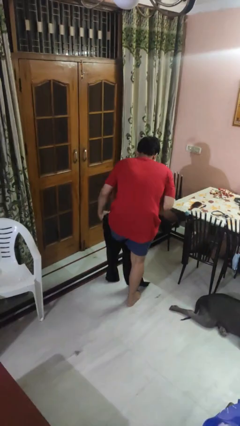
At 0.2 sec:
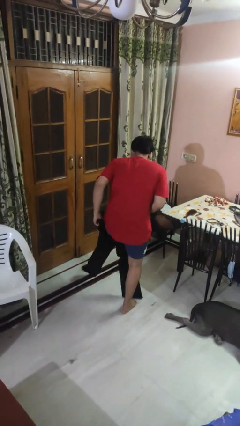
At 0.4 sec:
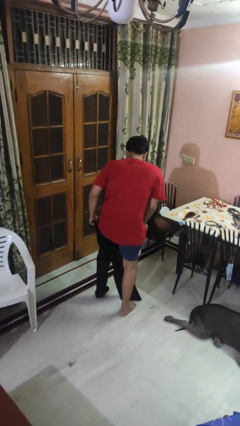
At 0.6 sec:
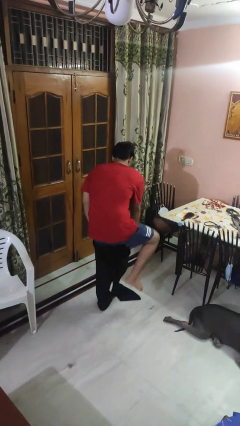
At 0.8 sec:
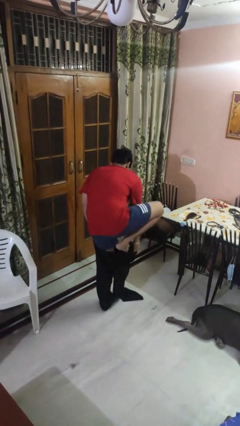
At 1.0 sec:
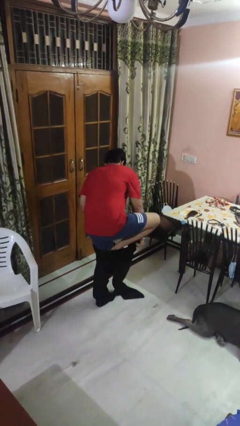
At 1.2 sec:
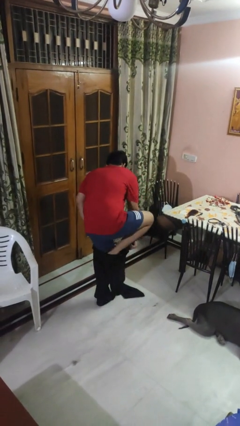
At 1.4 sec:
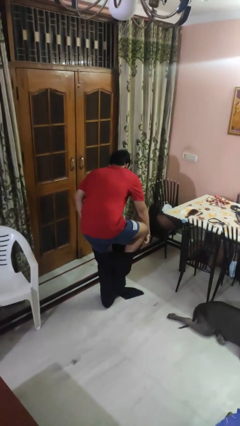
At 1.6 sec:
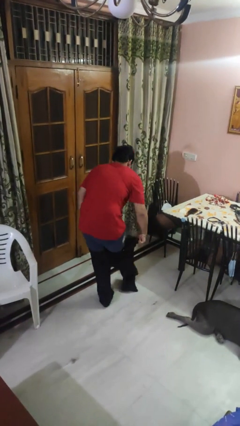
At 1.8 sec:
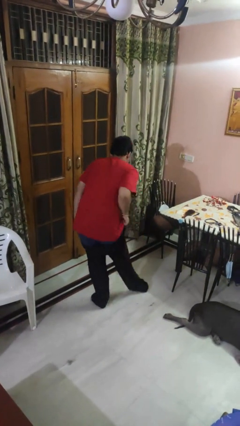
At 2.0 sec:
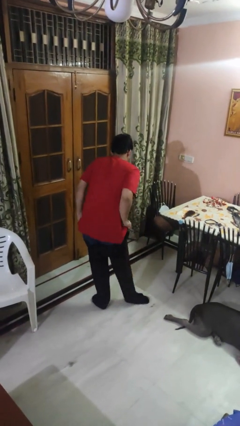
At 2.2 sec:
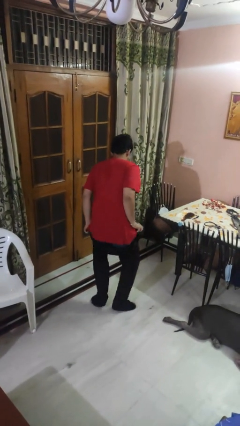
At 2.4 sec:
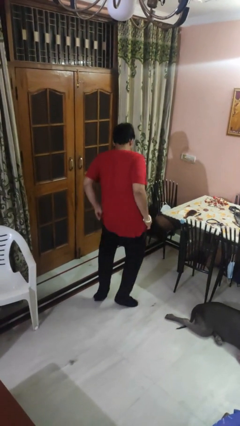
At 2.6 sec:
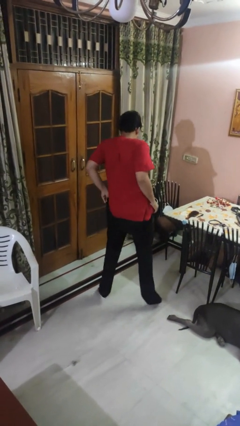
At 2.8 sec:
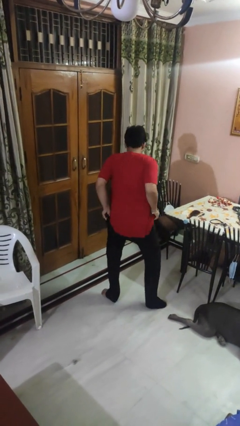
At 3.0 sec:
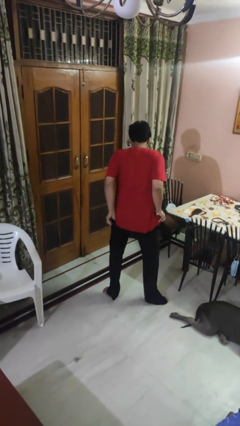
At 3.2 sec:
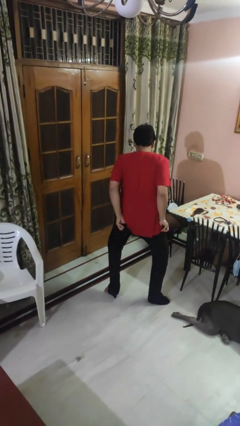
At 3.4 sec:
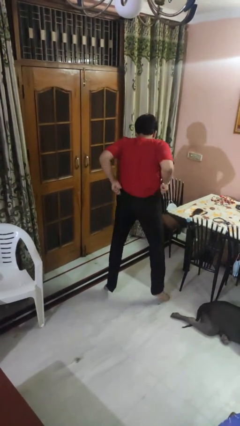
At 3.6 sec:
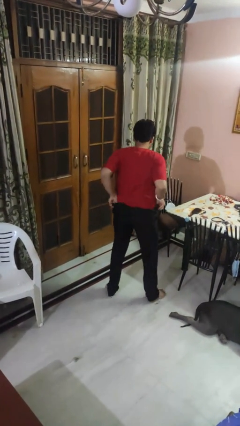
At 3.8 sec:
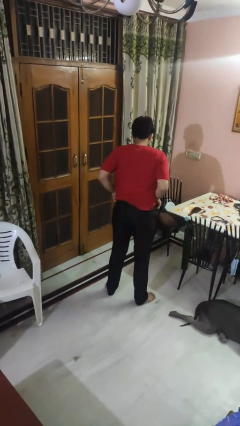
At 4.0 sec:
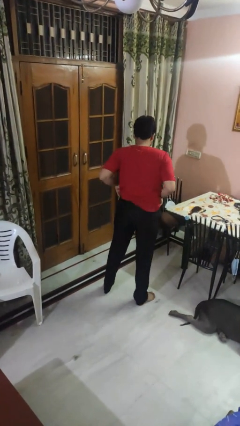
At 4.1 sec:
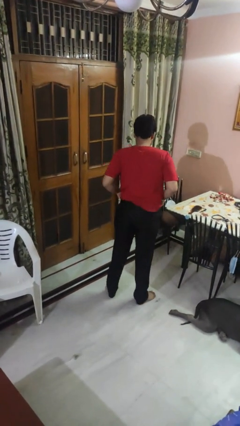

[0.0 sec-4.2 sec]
person puts on pants

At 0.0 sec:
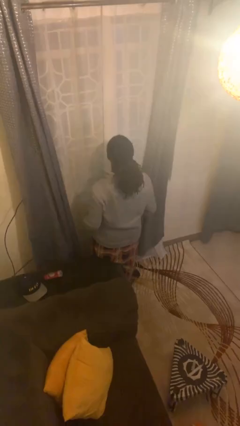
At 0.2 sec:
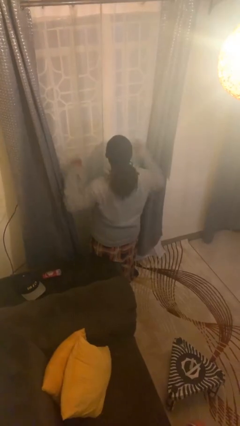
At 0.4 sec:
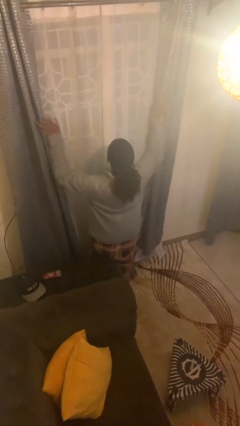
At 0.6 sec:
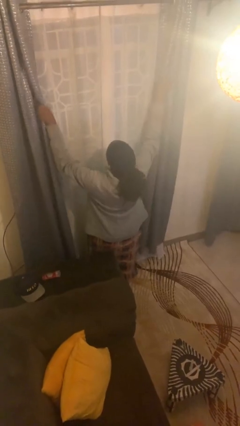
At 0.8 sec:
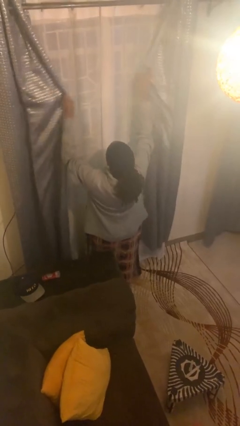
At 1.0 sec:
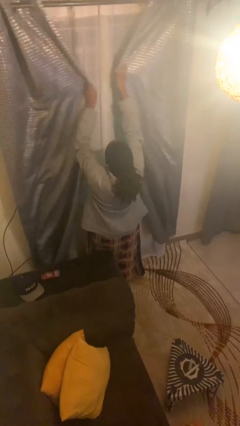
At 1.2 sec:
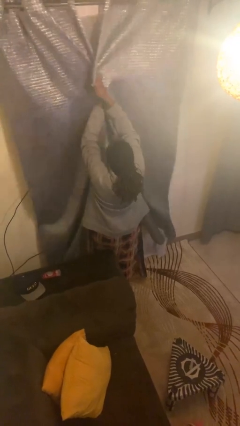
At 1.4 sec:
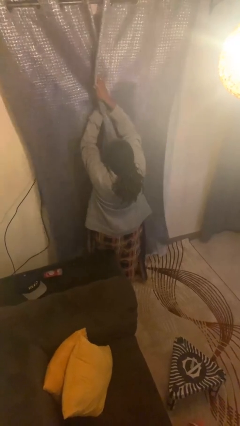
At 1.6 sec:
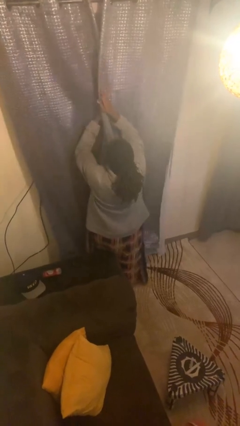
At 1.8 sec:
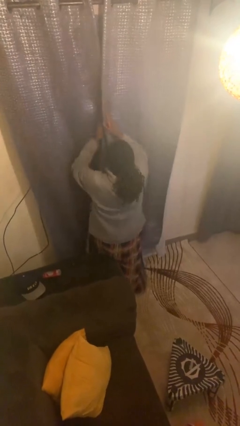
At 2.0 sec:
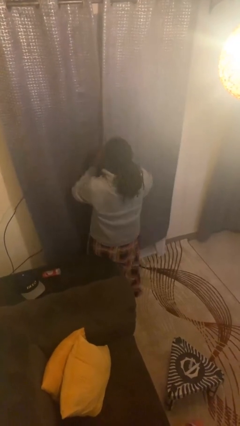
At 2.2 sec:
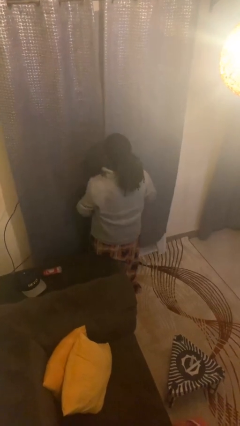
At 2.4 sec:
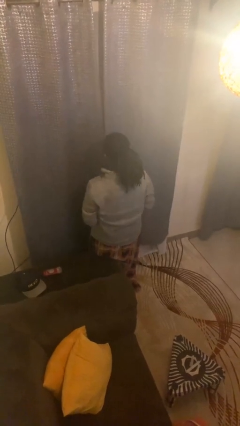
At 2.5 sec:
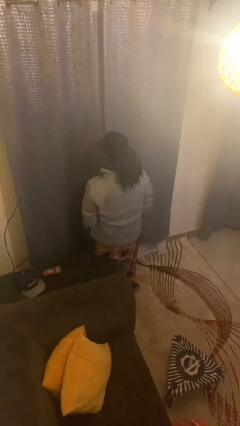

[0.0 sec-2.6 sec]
person closes curtains

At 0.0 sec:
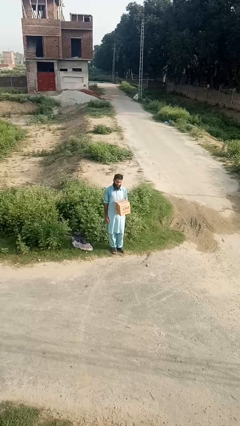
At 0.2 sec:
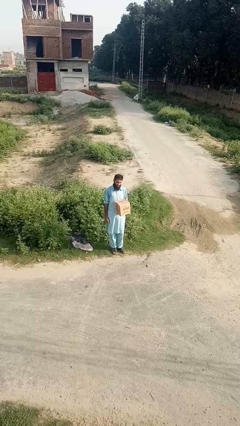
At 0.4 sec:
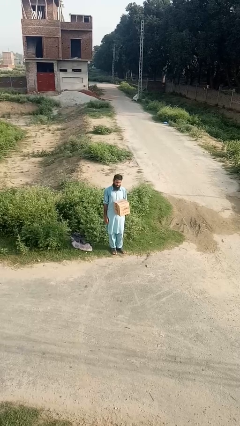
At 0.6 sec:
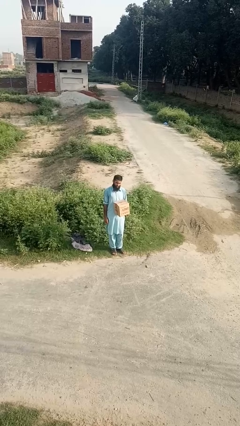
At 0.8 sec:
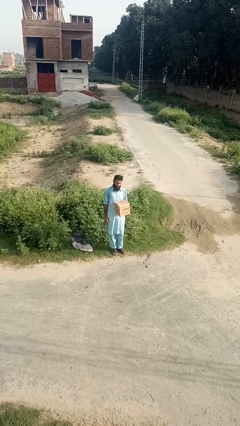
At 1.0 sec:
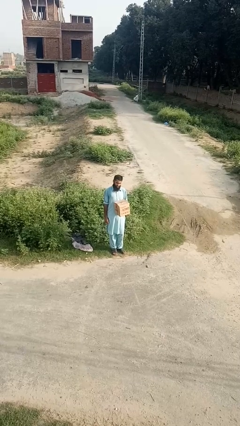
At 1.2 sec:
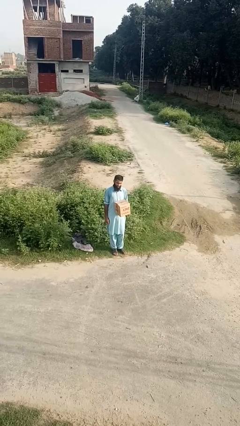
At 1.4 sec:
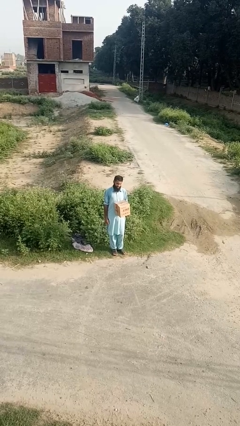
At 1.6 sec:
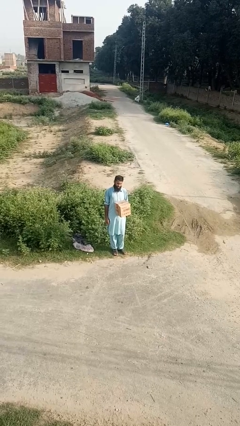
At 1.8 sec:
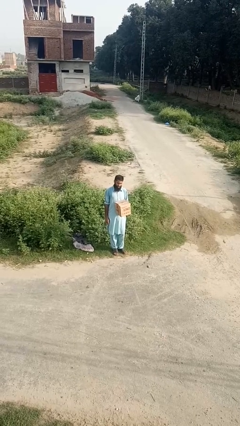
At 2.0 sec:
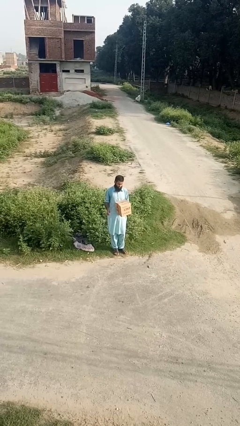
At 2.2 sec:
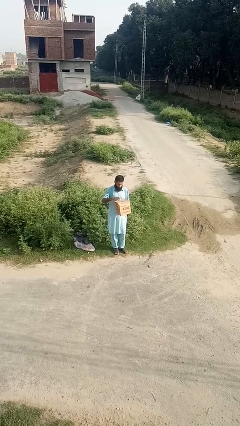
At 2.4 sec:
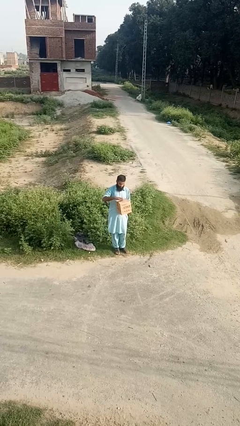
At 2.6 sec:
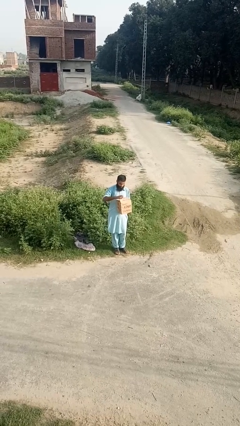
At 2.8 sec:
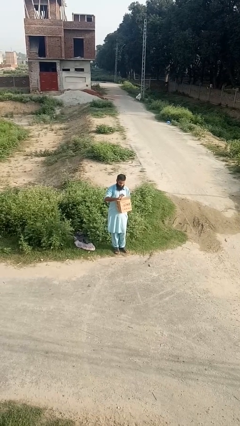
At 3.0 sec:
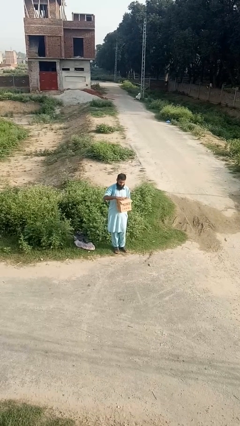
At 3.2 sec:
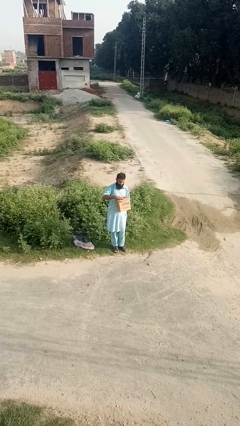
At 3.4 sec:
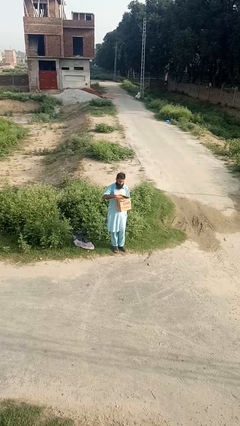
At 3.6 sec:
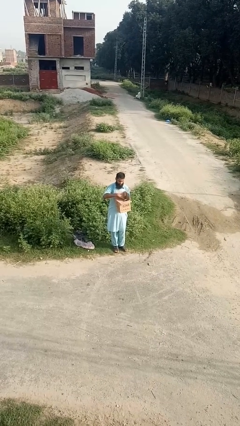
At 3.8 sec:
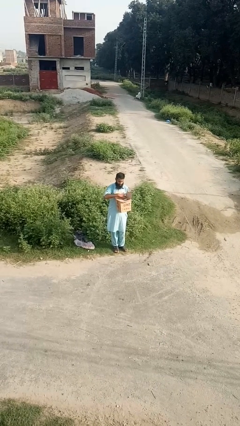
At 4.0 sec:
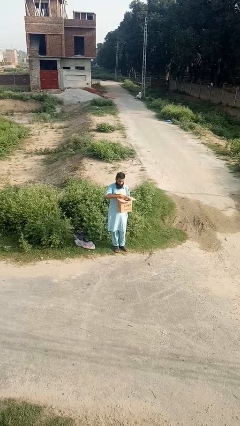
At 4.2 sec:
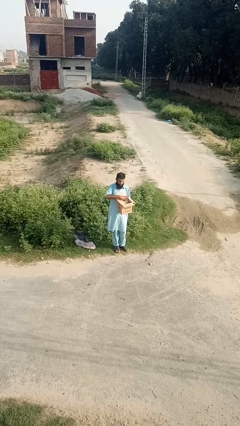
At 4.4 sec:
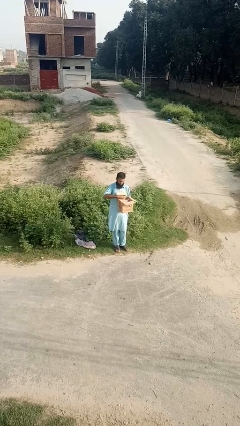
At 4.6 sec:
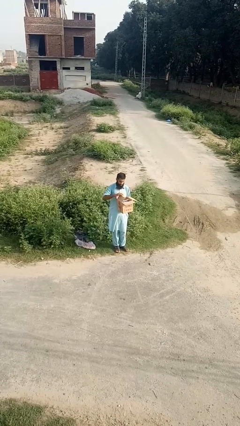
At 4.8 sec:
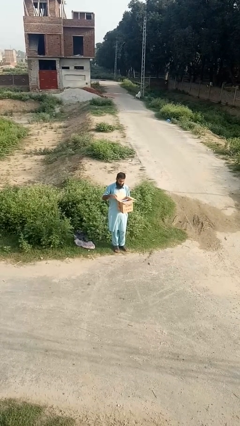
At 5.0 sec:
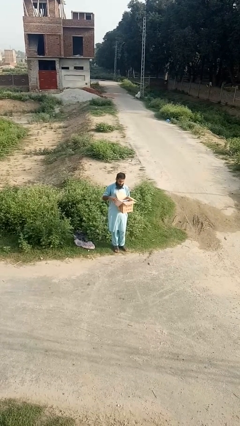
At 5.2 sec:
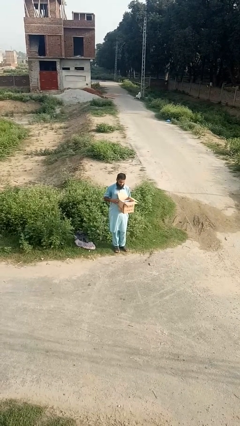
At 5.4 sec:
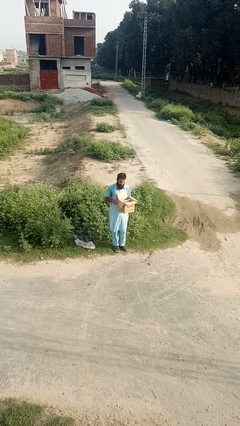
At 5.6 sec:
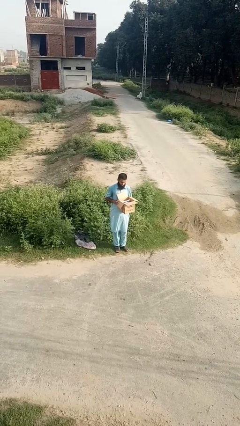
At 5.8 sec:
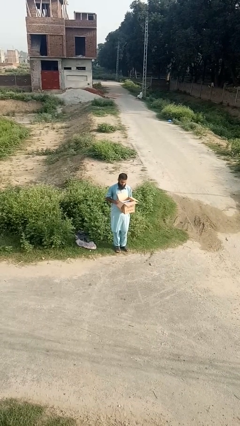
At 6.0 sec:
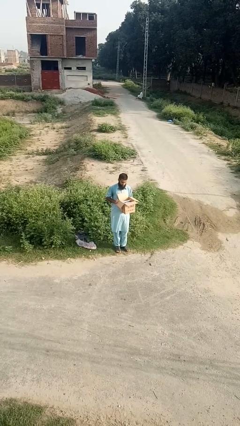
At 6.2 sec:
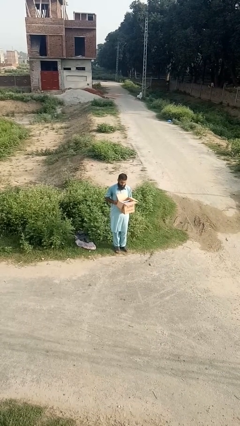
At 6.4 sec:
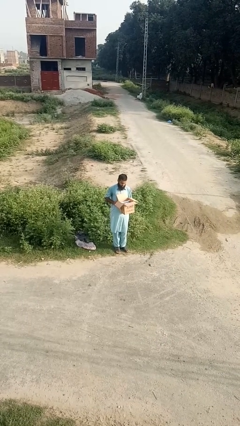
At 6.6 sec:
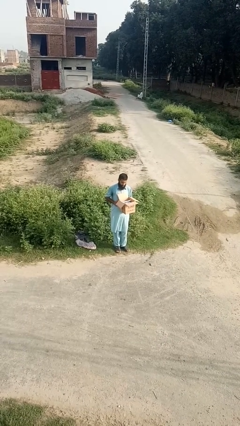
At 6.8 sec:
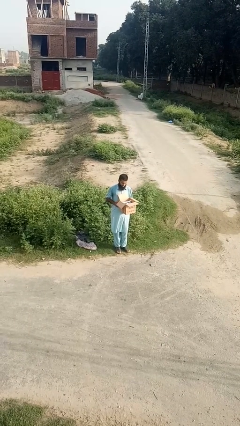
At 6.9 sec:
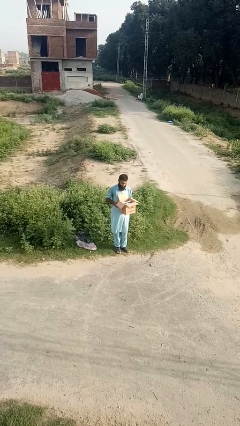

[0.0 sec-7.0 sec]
person opens mailbox

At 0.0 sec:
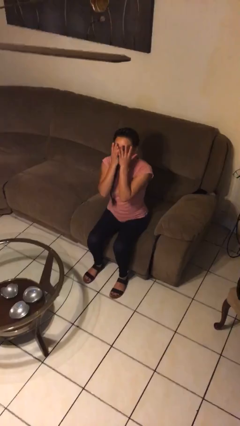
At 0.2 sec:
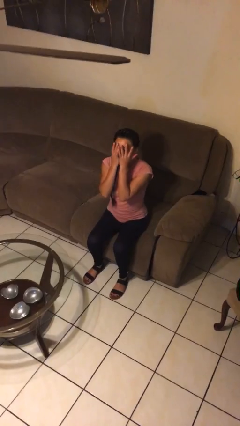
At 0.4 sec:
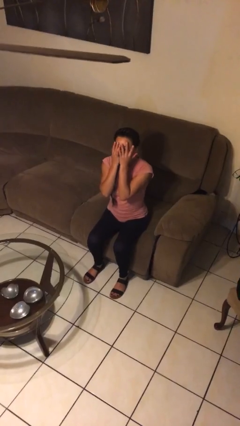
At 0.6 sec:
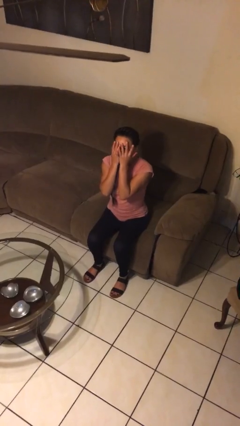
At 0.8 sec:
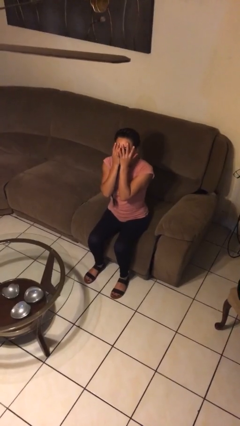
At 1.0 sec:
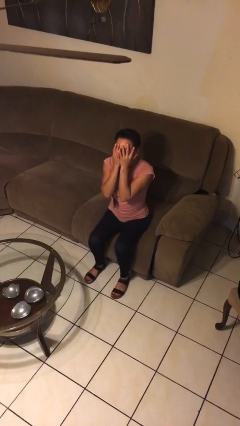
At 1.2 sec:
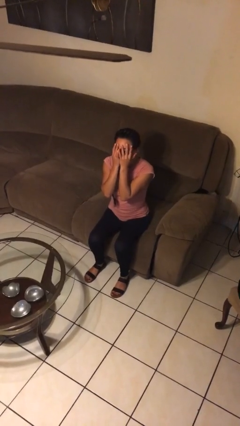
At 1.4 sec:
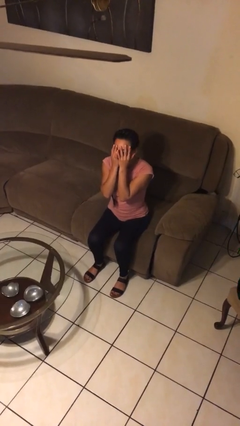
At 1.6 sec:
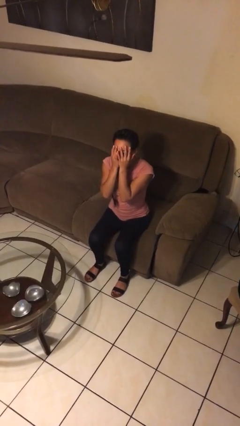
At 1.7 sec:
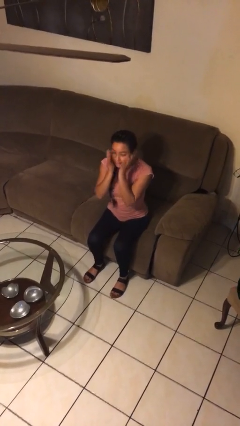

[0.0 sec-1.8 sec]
person covers face with hands

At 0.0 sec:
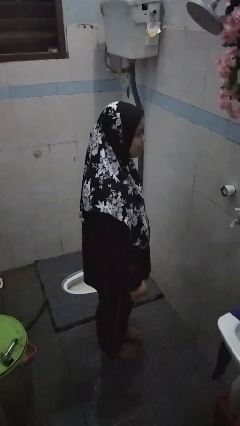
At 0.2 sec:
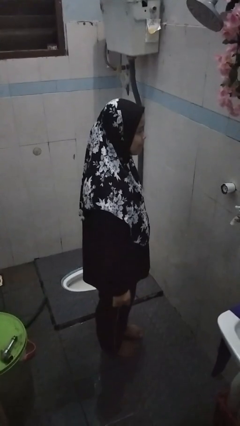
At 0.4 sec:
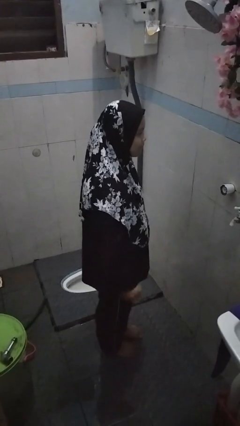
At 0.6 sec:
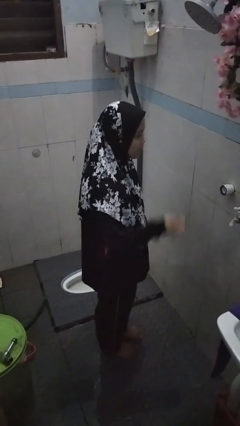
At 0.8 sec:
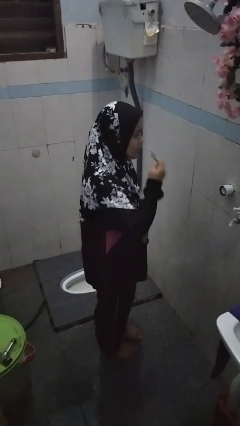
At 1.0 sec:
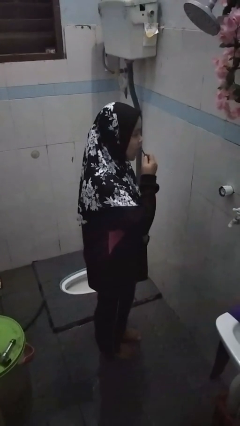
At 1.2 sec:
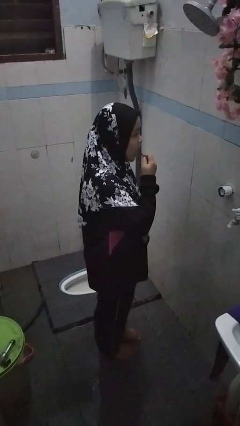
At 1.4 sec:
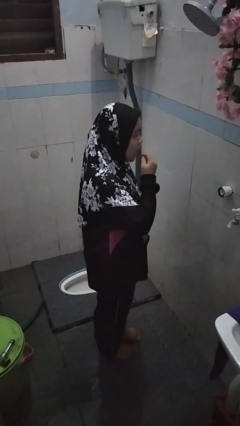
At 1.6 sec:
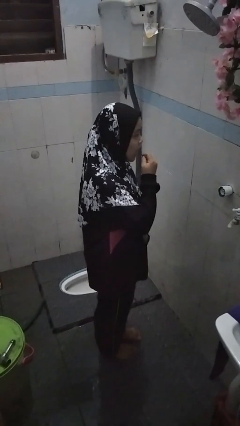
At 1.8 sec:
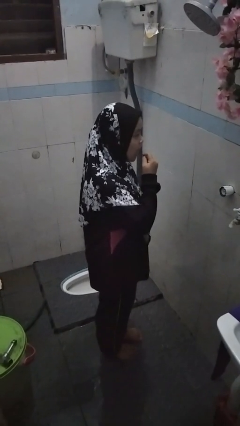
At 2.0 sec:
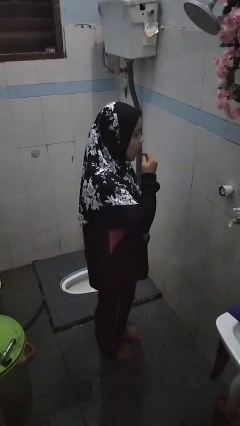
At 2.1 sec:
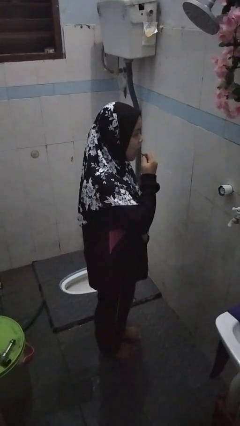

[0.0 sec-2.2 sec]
person flosses
